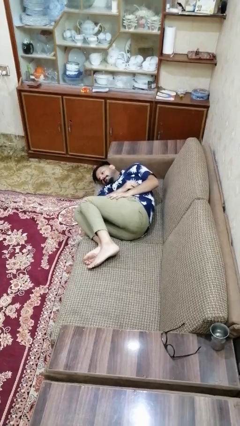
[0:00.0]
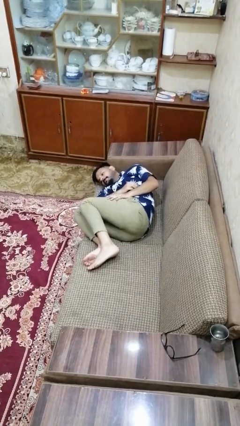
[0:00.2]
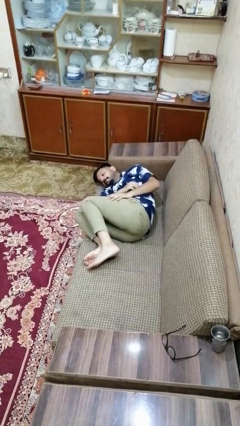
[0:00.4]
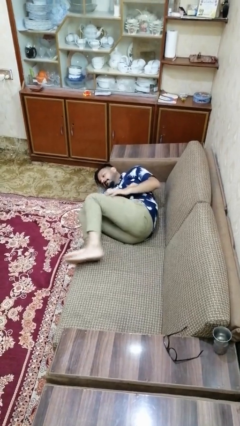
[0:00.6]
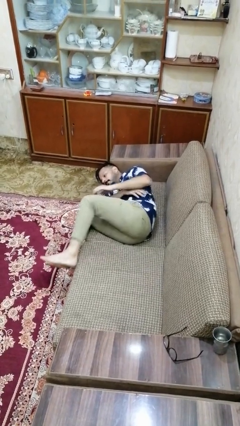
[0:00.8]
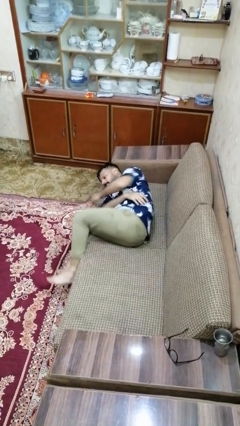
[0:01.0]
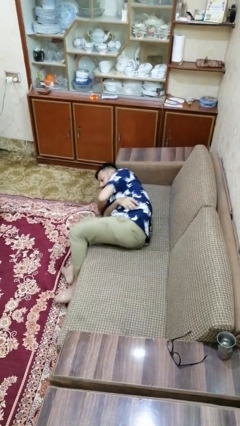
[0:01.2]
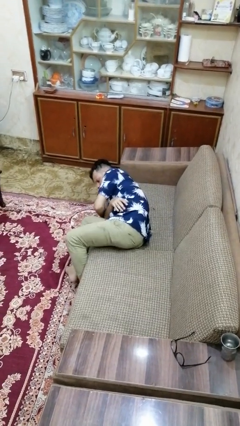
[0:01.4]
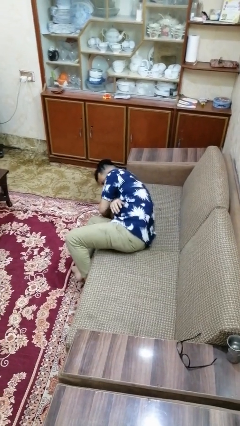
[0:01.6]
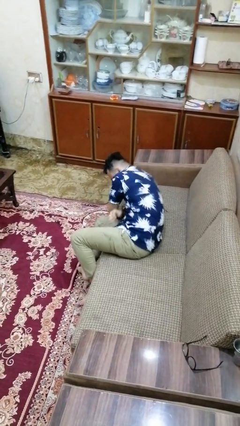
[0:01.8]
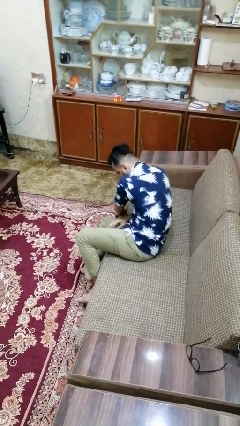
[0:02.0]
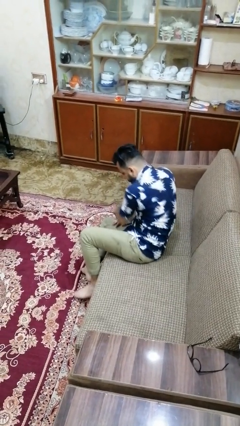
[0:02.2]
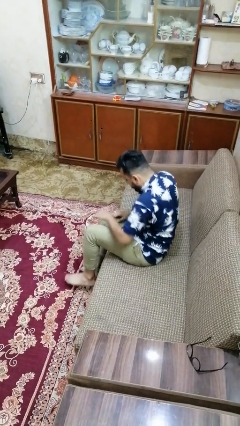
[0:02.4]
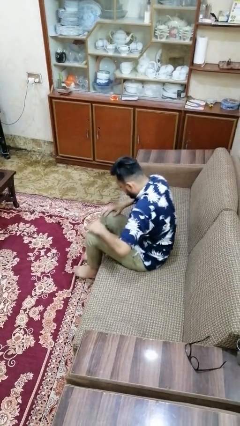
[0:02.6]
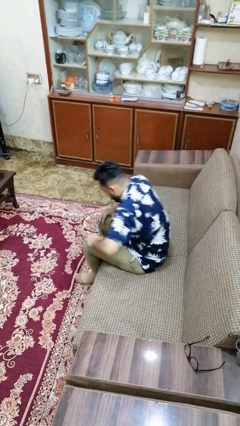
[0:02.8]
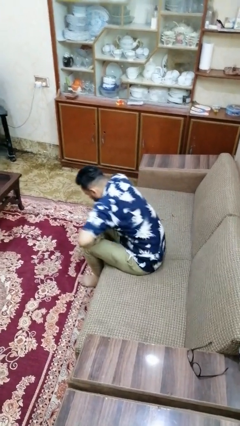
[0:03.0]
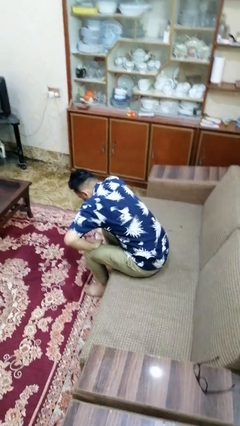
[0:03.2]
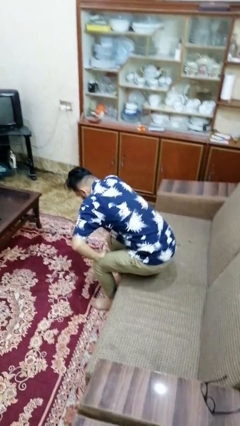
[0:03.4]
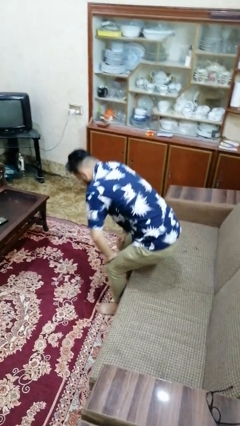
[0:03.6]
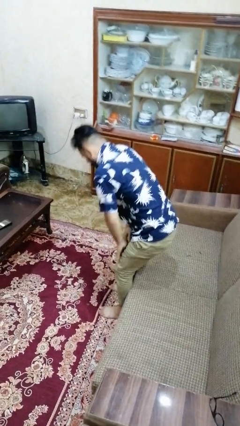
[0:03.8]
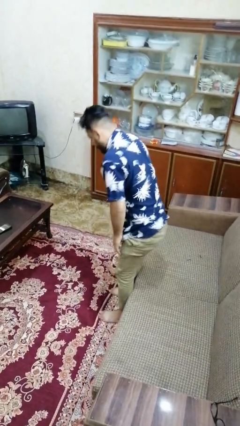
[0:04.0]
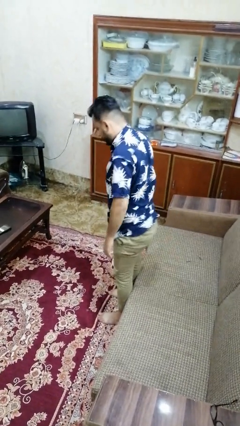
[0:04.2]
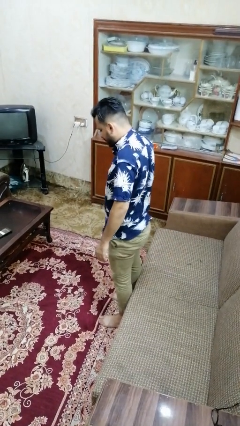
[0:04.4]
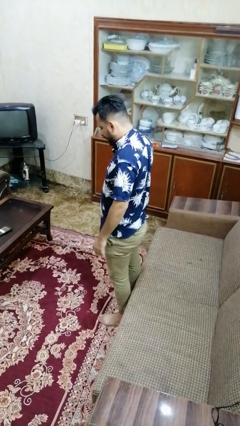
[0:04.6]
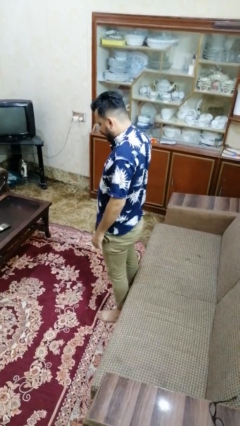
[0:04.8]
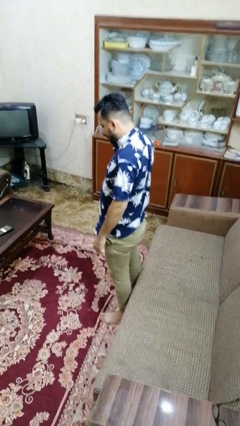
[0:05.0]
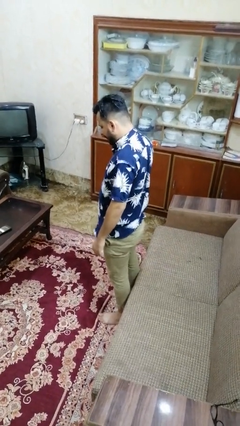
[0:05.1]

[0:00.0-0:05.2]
person stands up

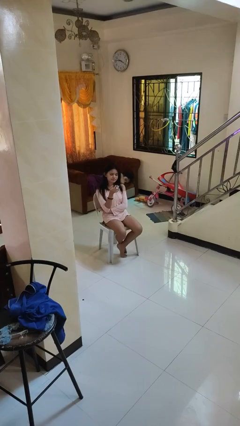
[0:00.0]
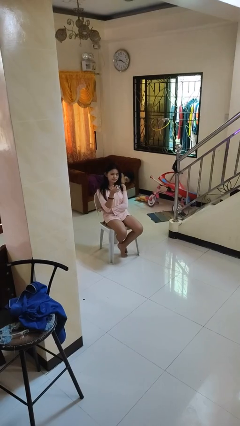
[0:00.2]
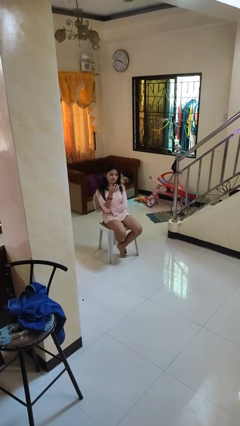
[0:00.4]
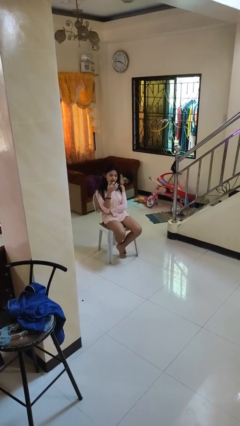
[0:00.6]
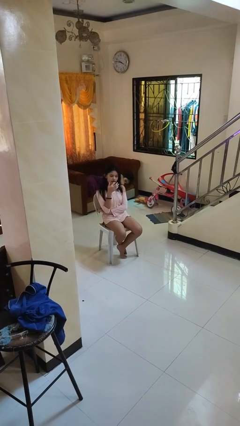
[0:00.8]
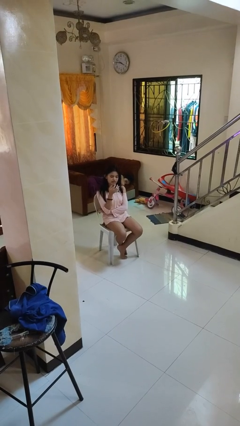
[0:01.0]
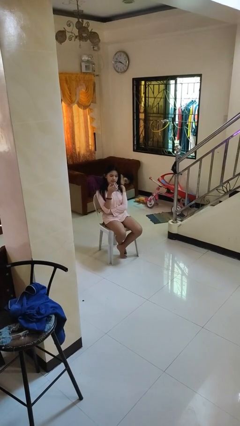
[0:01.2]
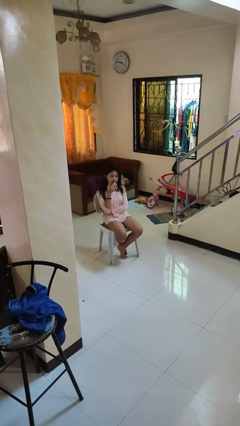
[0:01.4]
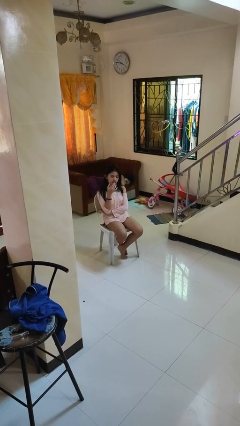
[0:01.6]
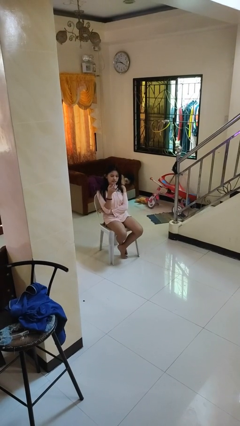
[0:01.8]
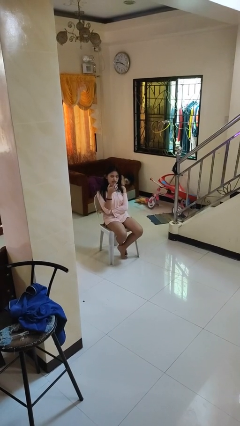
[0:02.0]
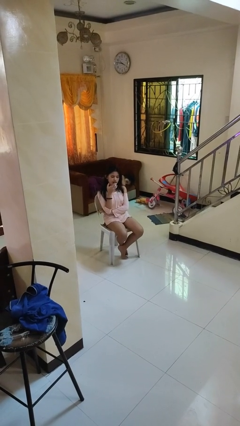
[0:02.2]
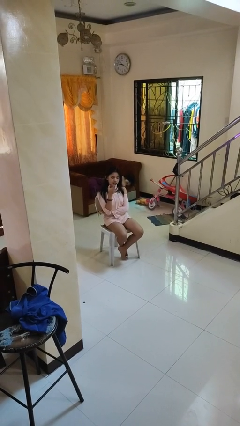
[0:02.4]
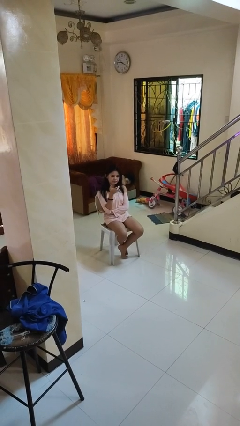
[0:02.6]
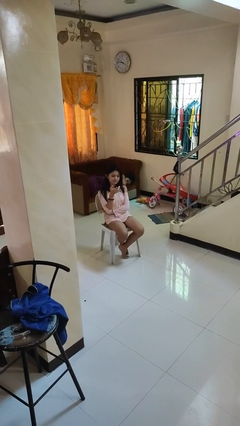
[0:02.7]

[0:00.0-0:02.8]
person licks fingers

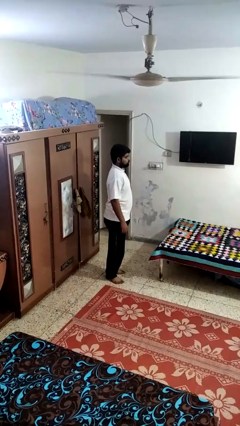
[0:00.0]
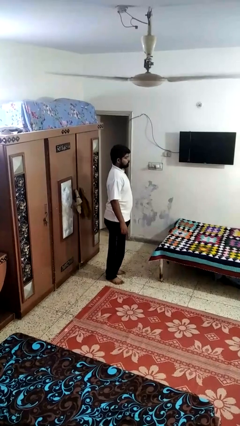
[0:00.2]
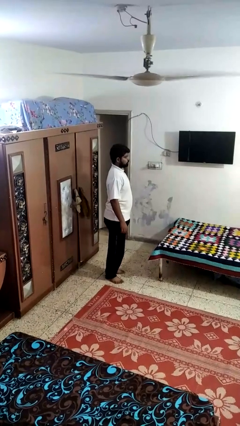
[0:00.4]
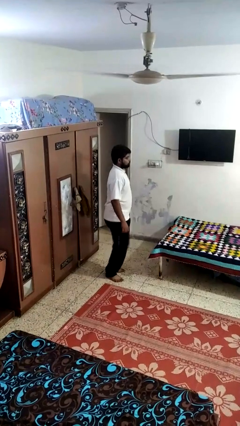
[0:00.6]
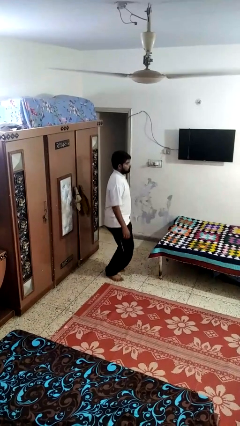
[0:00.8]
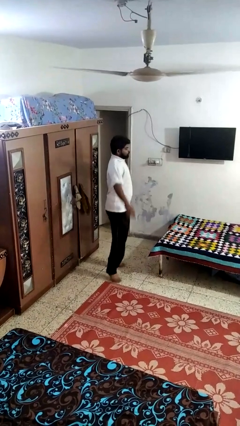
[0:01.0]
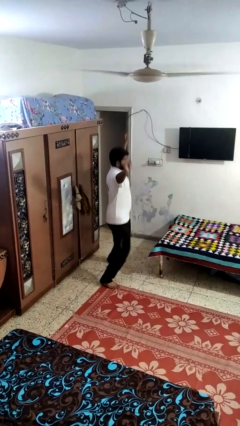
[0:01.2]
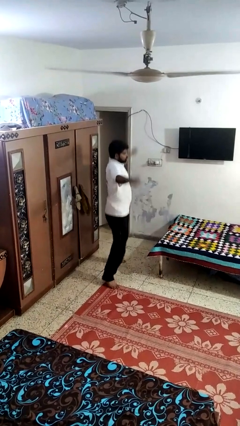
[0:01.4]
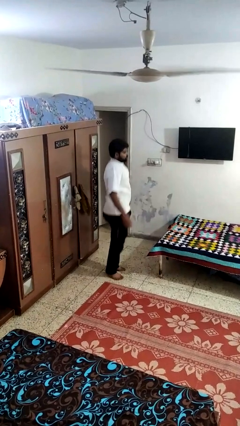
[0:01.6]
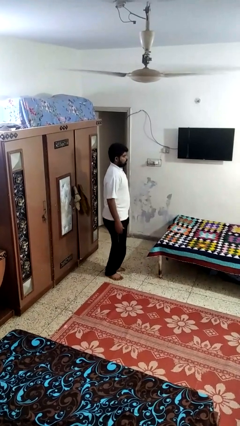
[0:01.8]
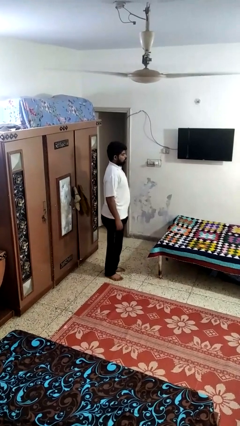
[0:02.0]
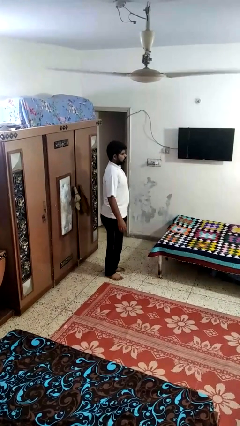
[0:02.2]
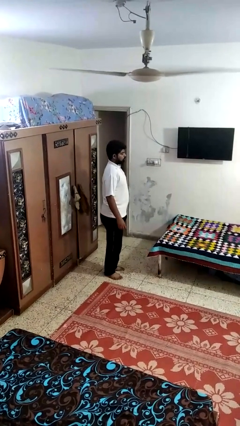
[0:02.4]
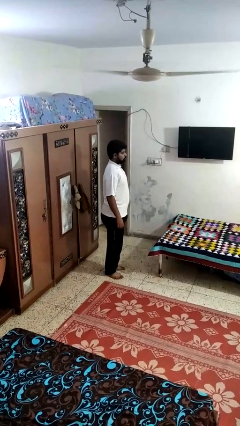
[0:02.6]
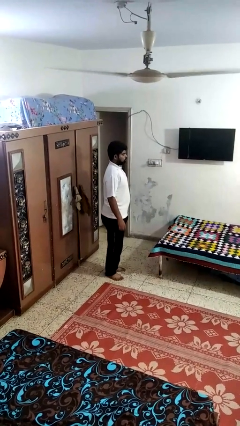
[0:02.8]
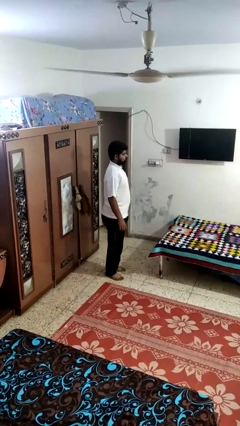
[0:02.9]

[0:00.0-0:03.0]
person exercises with jumping jacks

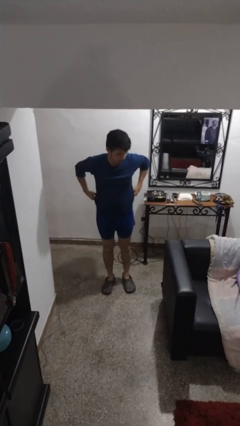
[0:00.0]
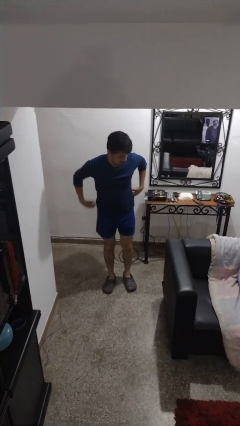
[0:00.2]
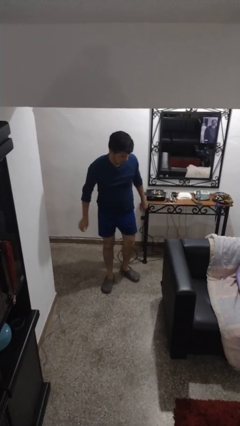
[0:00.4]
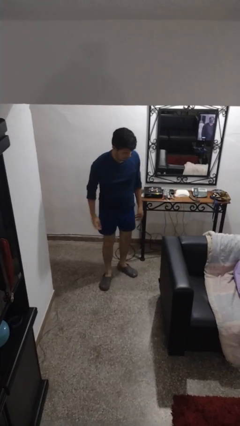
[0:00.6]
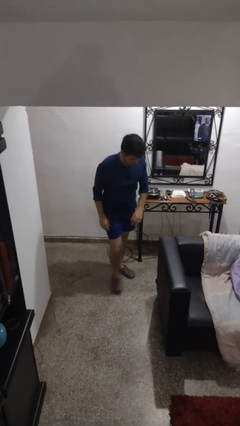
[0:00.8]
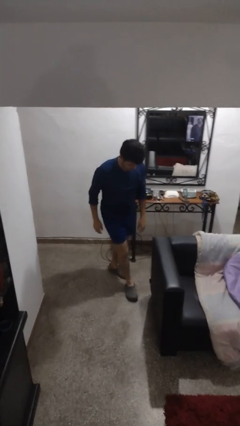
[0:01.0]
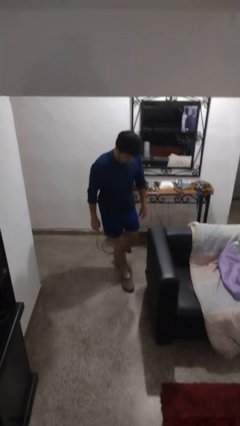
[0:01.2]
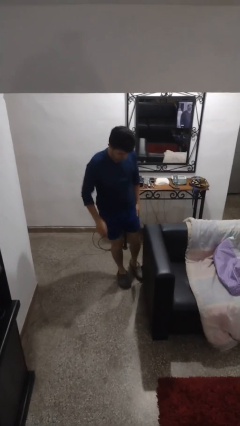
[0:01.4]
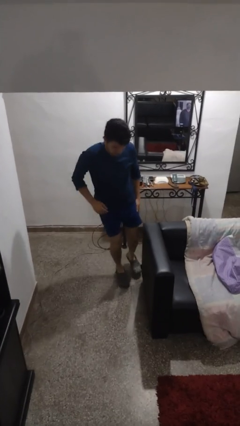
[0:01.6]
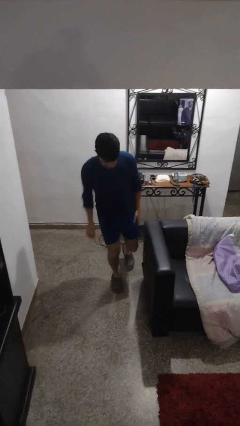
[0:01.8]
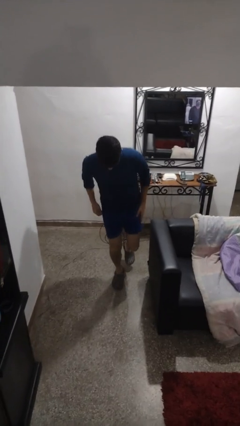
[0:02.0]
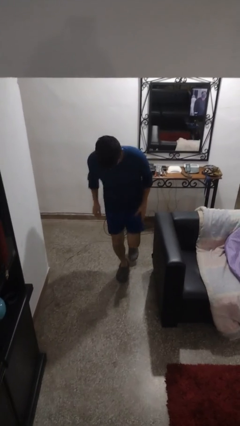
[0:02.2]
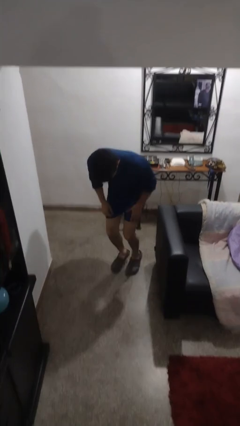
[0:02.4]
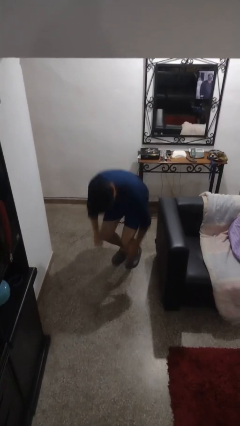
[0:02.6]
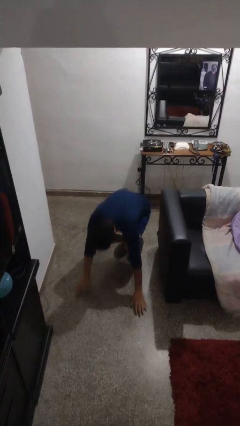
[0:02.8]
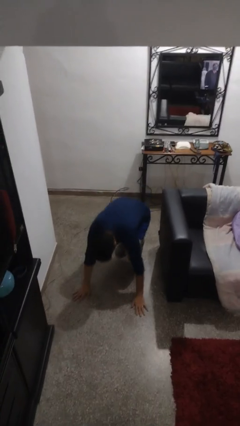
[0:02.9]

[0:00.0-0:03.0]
person trips on object on floor

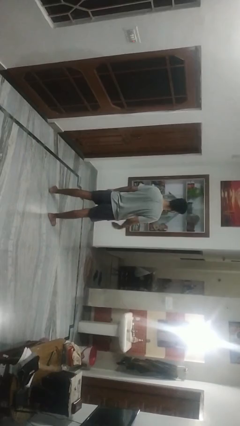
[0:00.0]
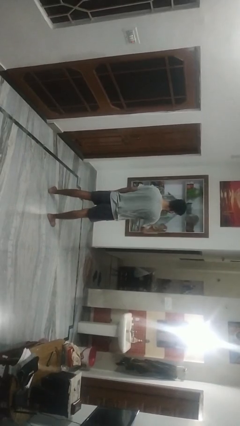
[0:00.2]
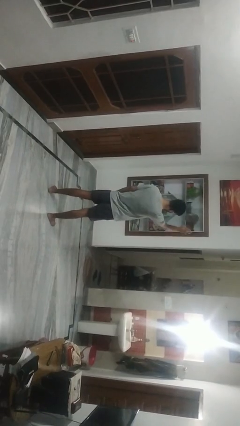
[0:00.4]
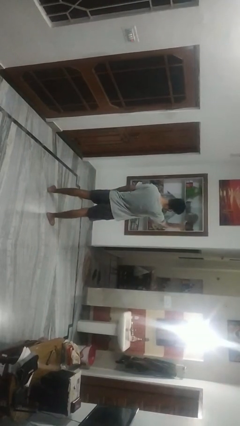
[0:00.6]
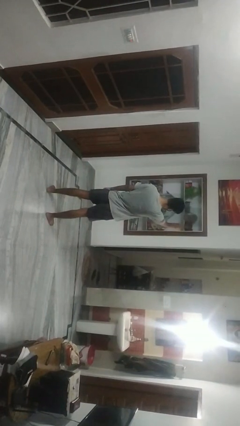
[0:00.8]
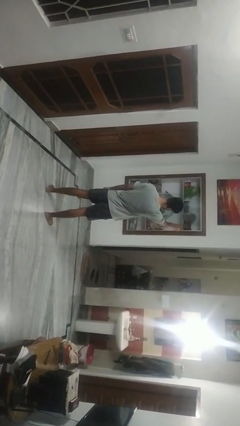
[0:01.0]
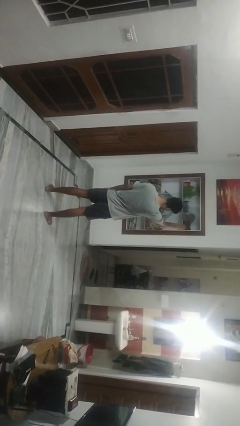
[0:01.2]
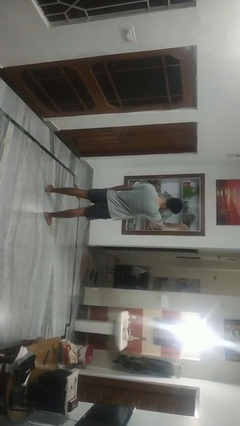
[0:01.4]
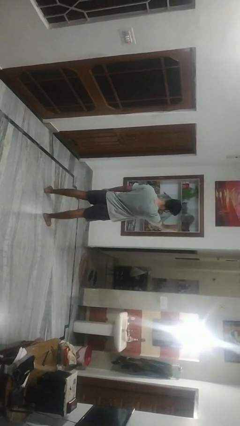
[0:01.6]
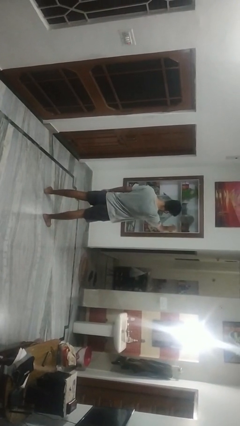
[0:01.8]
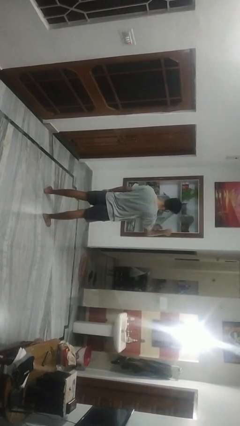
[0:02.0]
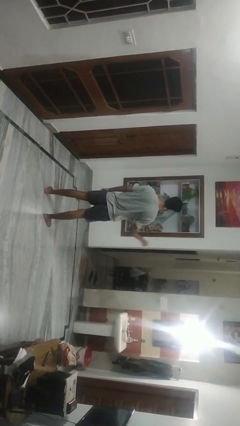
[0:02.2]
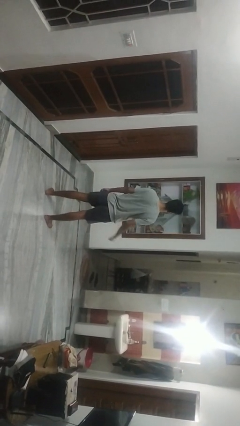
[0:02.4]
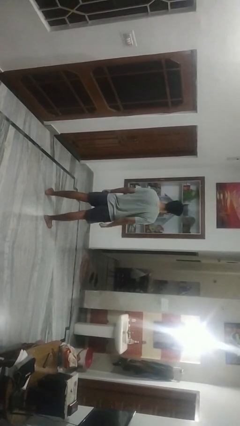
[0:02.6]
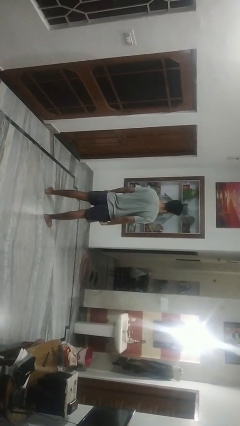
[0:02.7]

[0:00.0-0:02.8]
person gestures come here

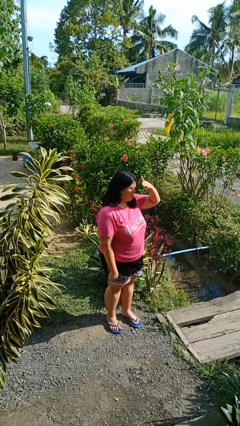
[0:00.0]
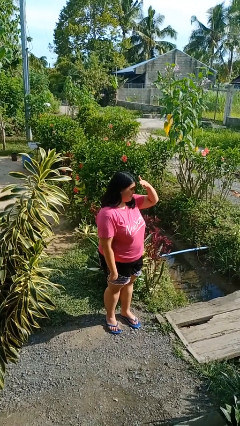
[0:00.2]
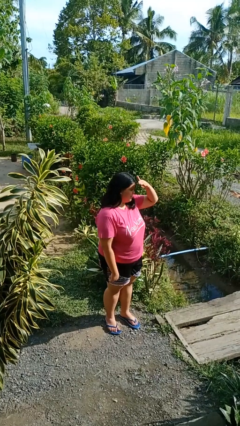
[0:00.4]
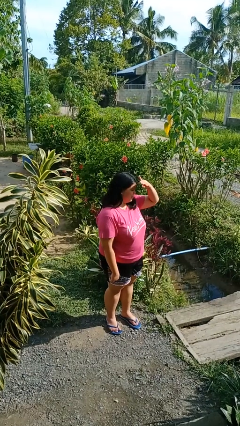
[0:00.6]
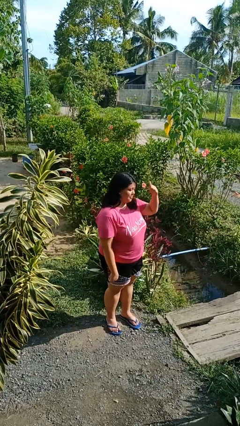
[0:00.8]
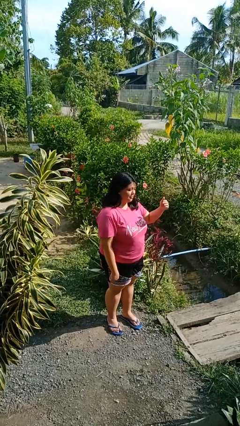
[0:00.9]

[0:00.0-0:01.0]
person shades eyes
